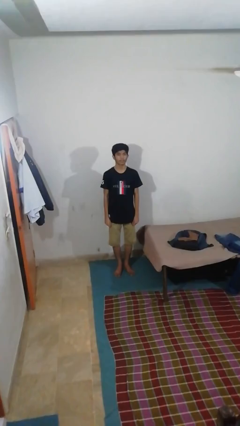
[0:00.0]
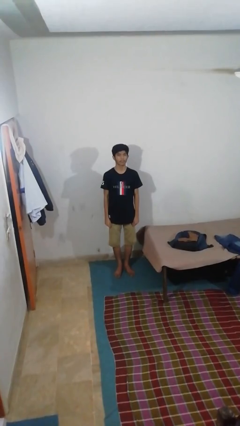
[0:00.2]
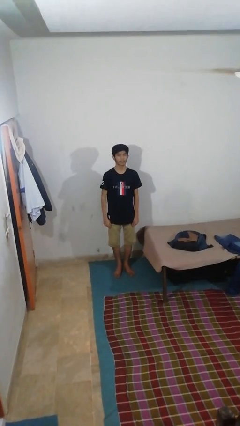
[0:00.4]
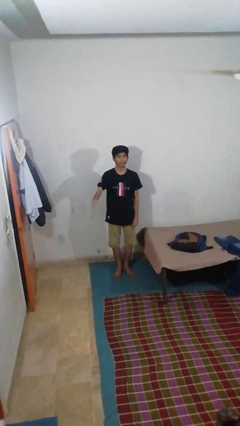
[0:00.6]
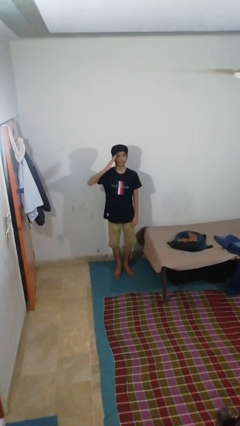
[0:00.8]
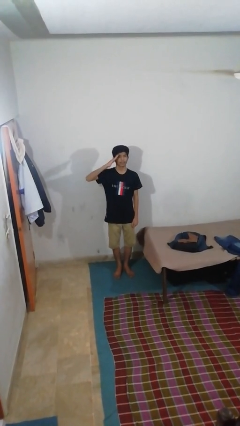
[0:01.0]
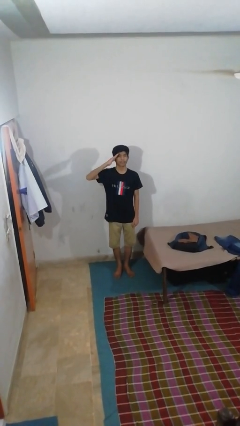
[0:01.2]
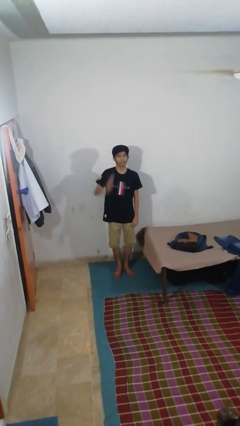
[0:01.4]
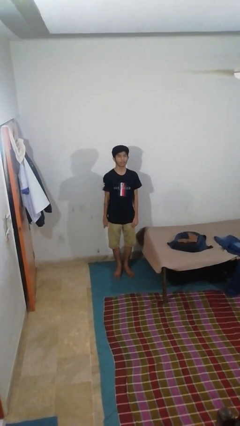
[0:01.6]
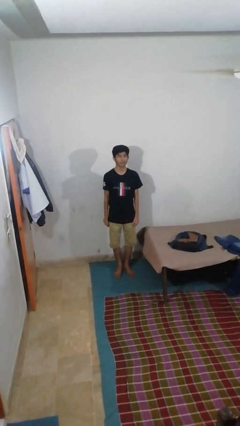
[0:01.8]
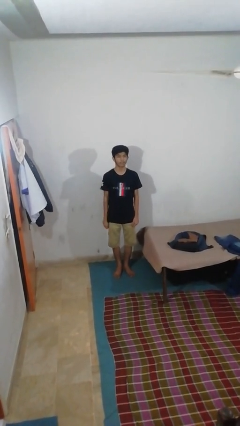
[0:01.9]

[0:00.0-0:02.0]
person salutes

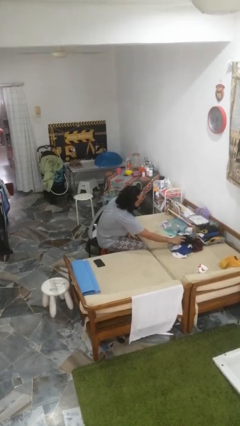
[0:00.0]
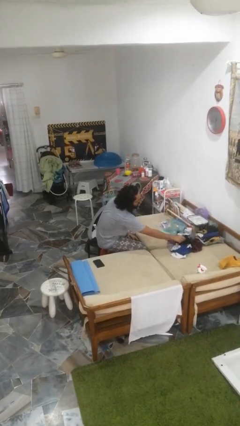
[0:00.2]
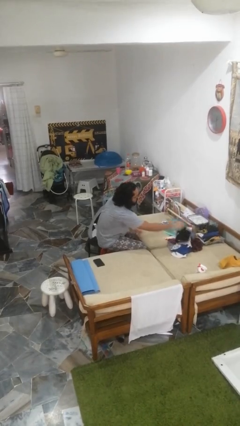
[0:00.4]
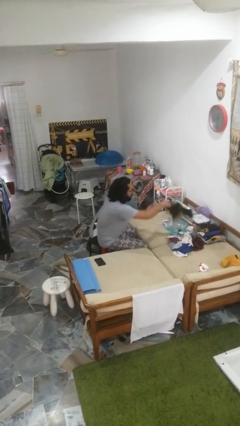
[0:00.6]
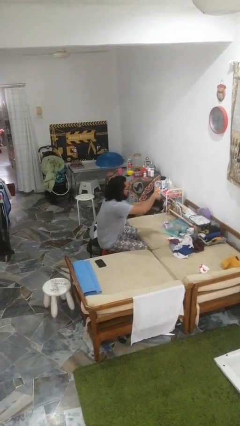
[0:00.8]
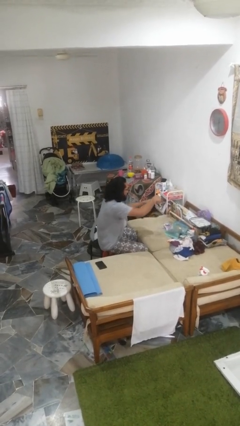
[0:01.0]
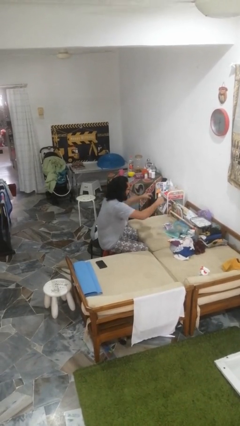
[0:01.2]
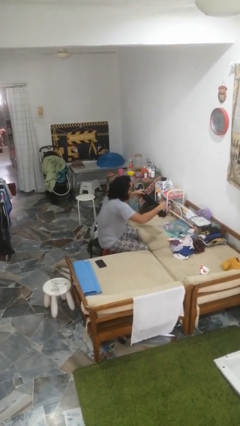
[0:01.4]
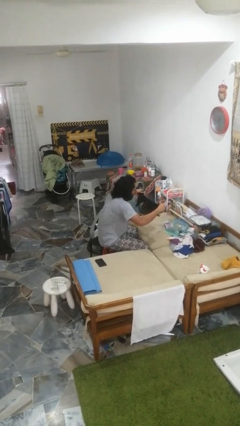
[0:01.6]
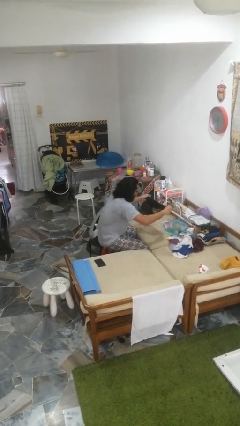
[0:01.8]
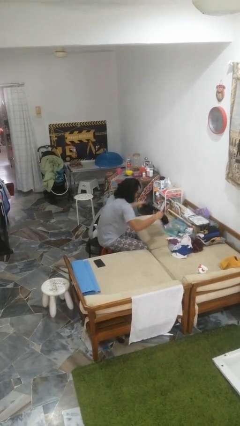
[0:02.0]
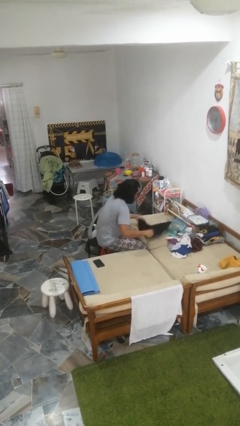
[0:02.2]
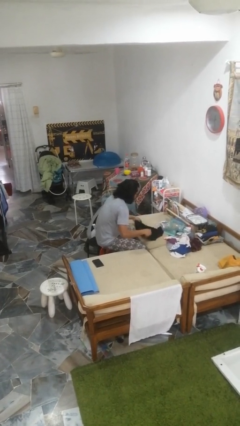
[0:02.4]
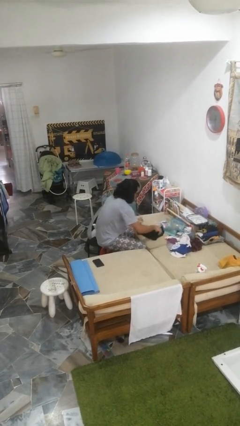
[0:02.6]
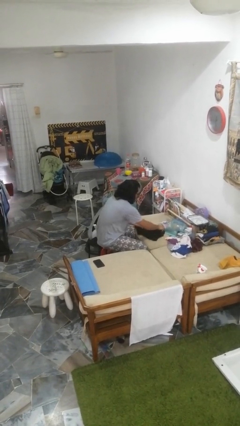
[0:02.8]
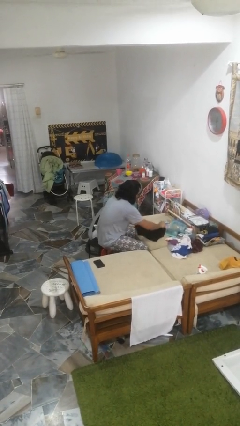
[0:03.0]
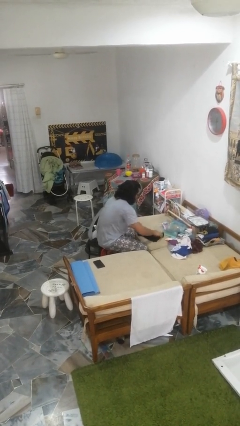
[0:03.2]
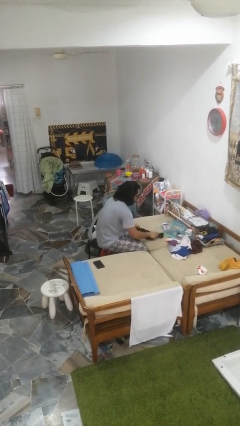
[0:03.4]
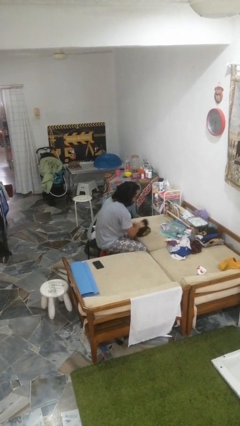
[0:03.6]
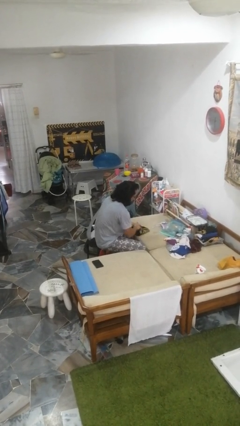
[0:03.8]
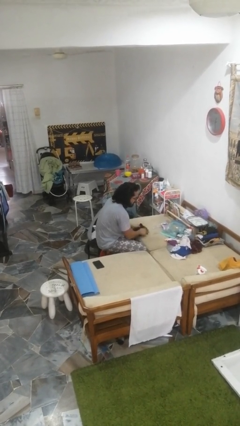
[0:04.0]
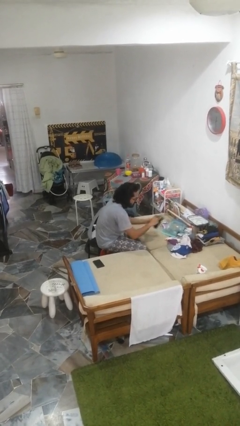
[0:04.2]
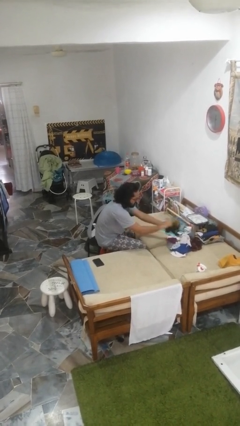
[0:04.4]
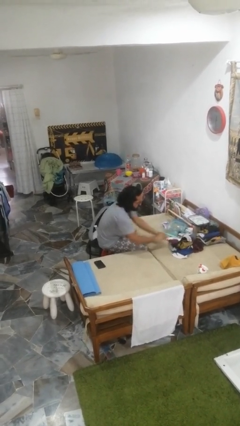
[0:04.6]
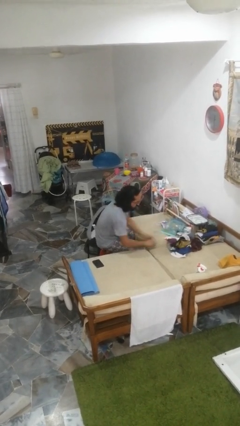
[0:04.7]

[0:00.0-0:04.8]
person folds shirt

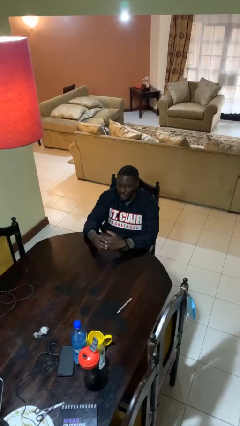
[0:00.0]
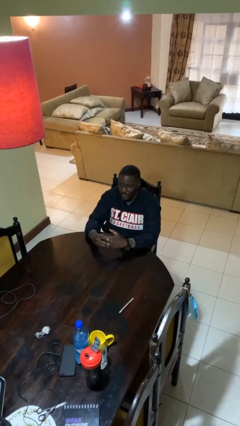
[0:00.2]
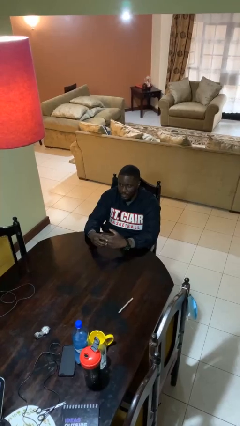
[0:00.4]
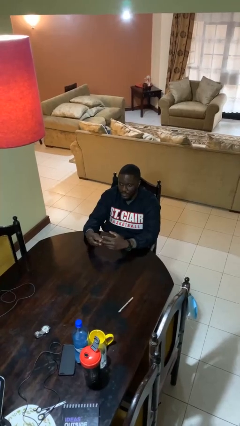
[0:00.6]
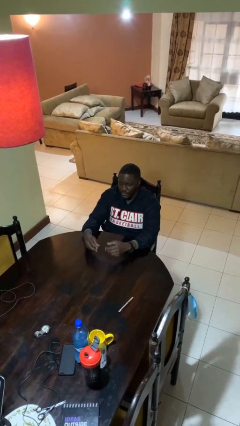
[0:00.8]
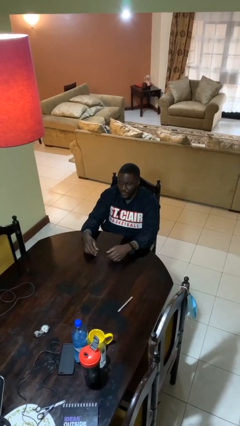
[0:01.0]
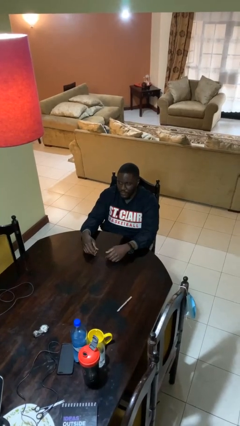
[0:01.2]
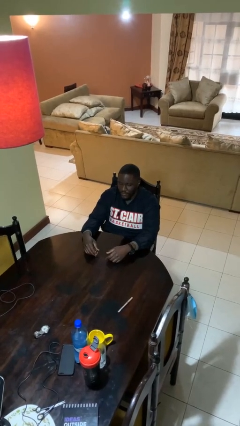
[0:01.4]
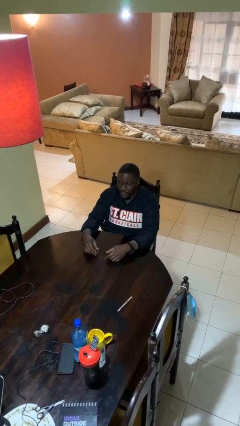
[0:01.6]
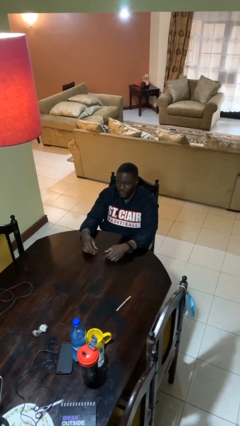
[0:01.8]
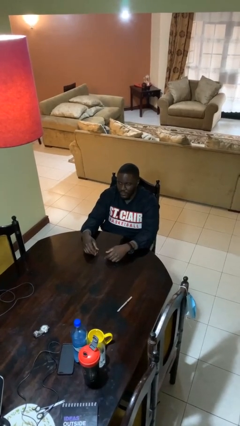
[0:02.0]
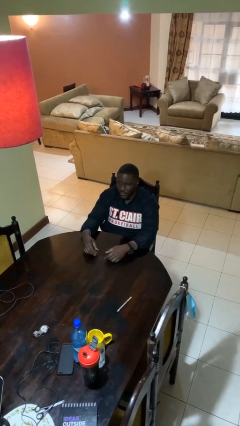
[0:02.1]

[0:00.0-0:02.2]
person takes off ring

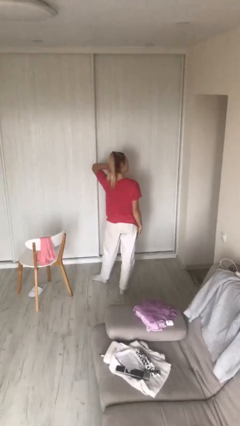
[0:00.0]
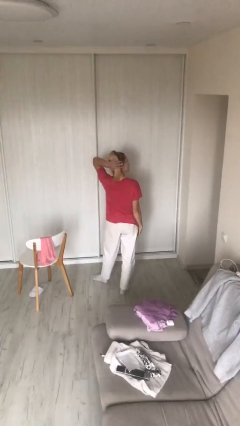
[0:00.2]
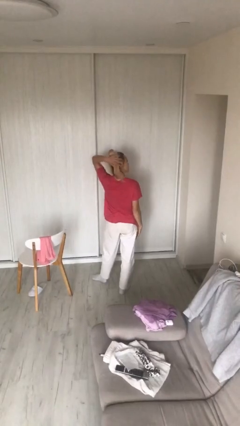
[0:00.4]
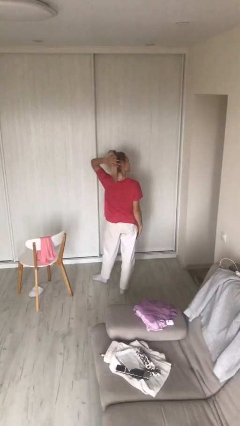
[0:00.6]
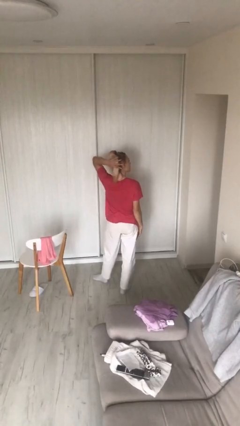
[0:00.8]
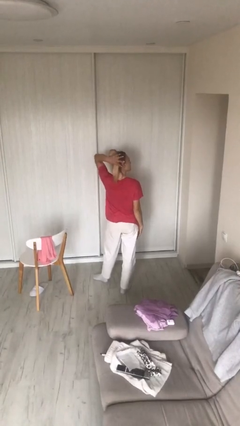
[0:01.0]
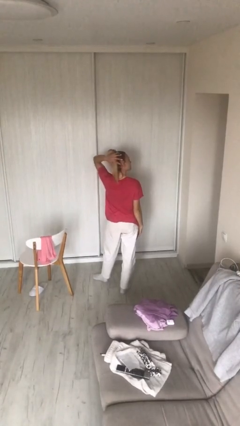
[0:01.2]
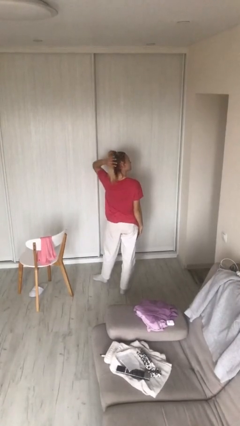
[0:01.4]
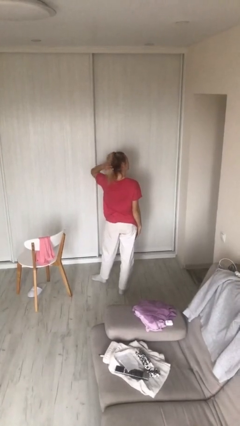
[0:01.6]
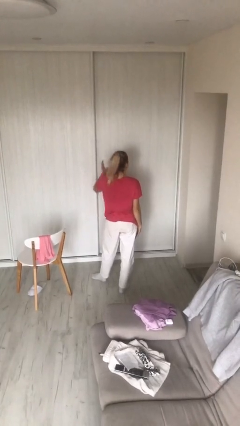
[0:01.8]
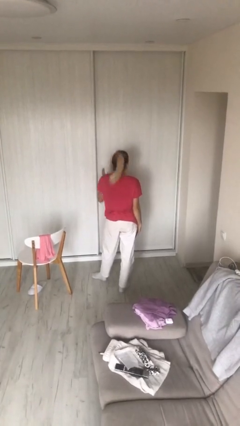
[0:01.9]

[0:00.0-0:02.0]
person pats head

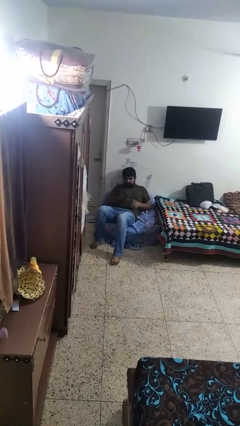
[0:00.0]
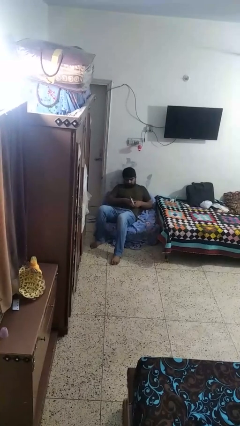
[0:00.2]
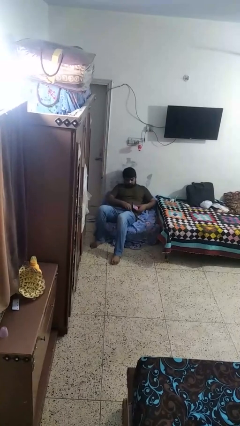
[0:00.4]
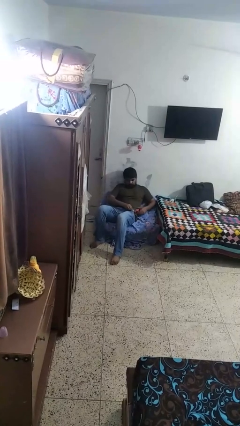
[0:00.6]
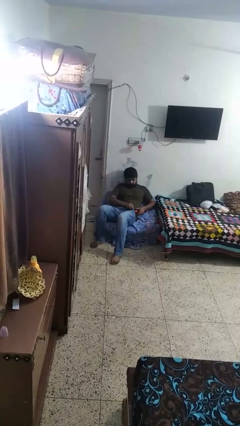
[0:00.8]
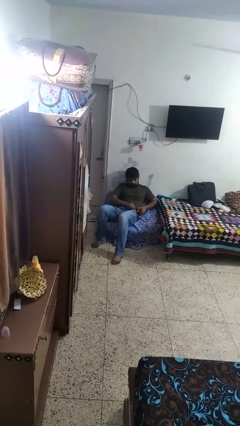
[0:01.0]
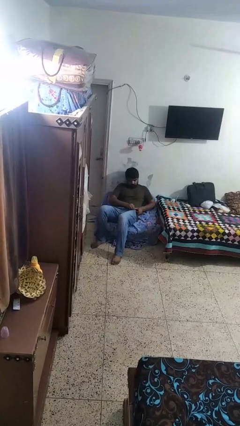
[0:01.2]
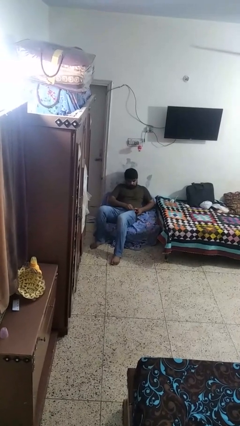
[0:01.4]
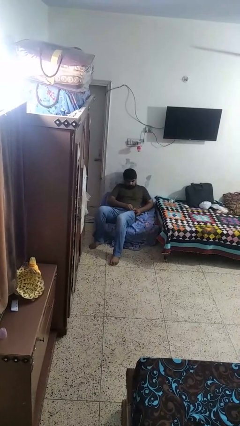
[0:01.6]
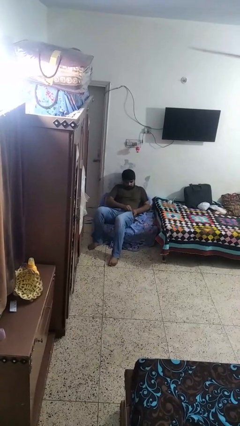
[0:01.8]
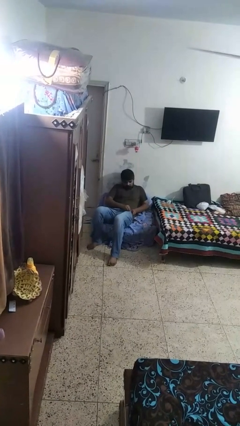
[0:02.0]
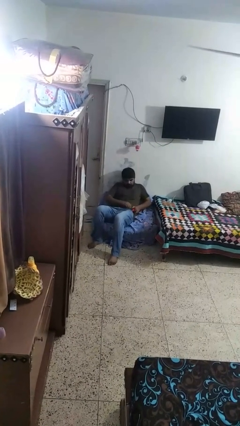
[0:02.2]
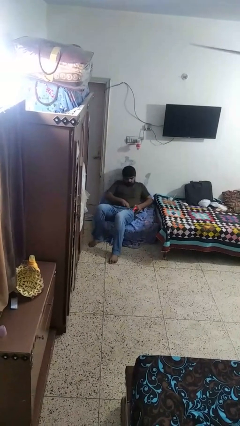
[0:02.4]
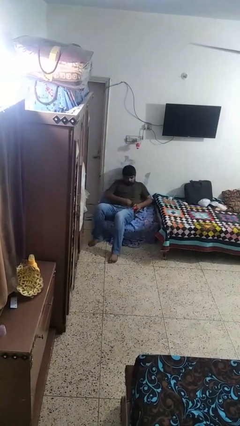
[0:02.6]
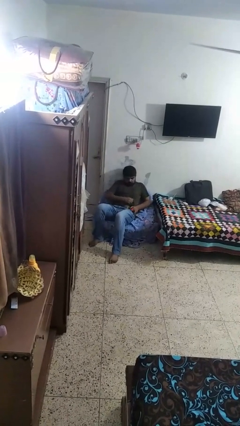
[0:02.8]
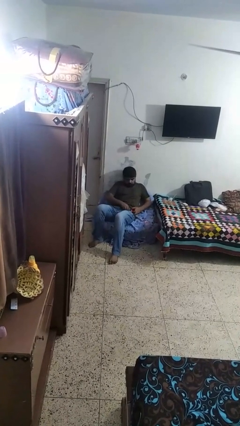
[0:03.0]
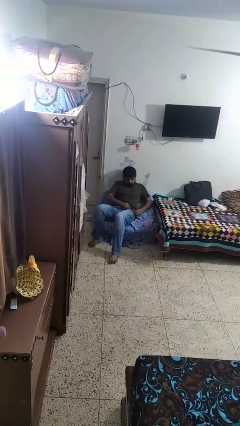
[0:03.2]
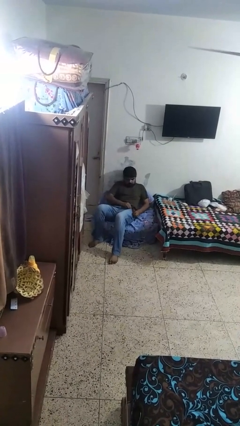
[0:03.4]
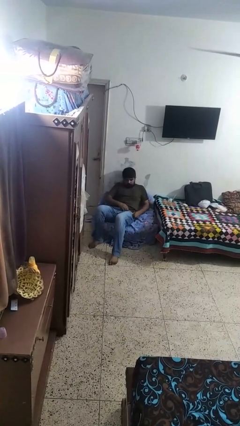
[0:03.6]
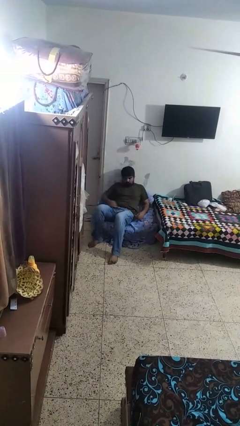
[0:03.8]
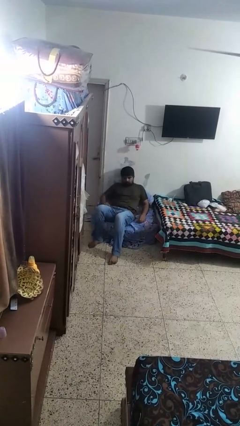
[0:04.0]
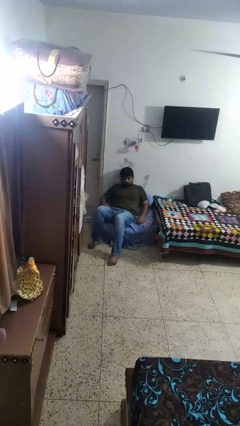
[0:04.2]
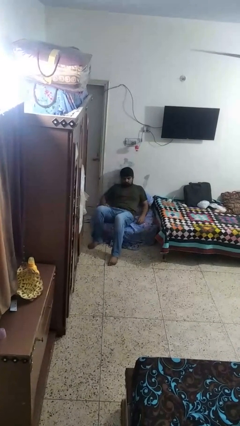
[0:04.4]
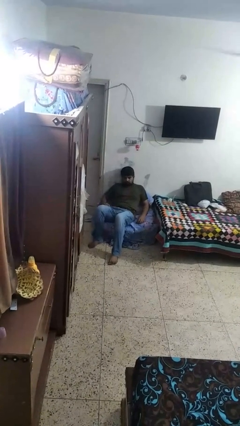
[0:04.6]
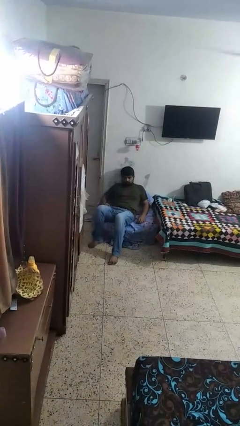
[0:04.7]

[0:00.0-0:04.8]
person puts phone into pocket

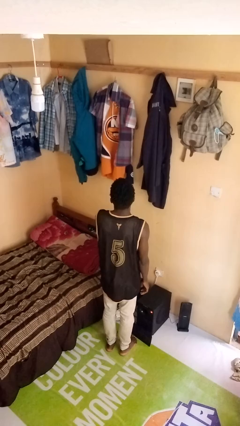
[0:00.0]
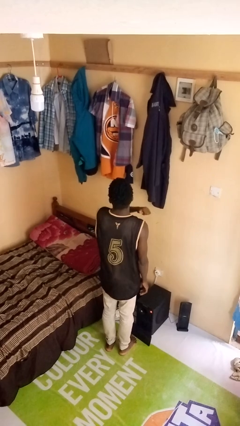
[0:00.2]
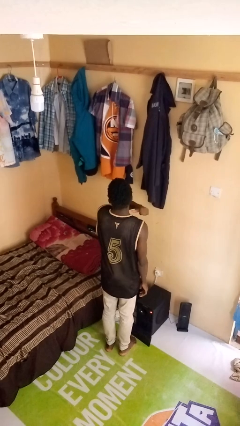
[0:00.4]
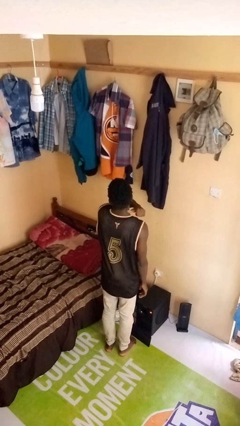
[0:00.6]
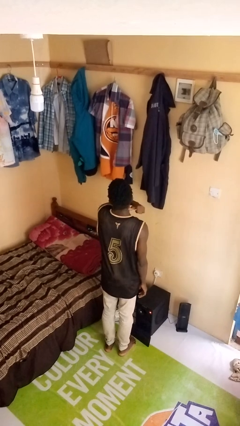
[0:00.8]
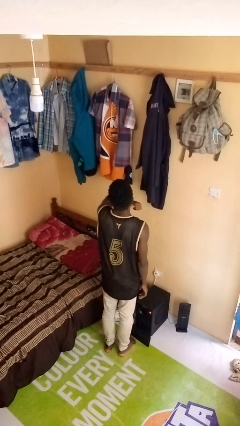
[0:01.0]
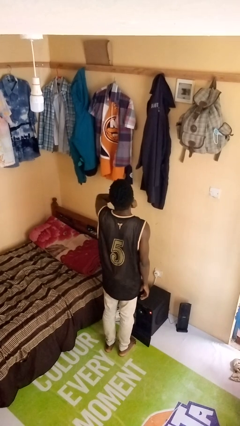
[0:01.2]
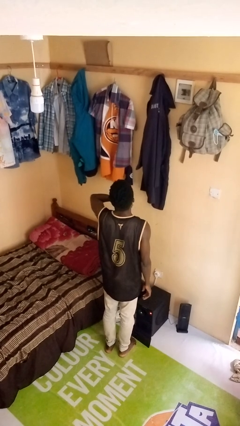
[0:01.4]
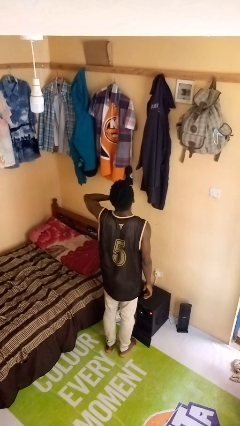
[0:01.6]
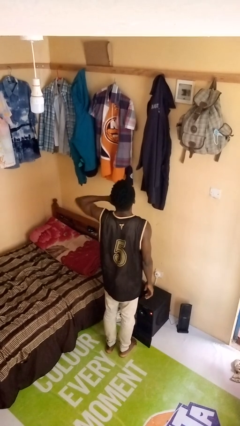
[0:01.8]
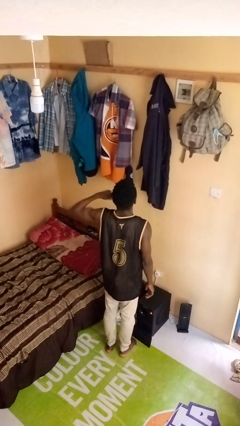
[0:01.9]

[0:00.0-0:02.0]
person gestures cut
